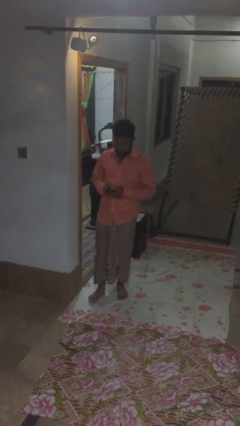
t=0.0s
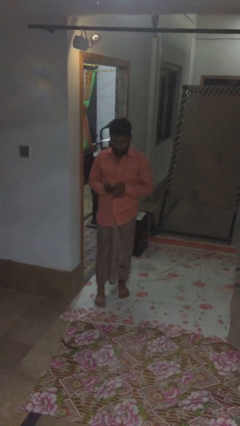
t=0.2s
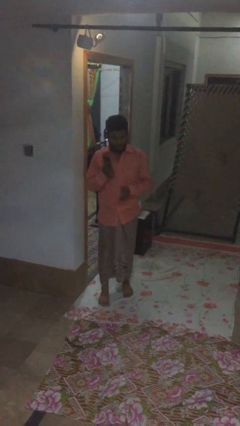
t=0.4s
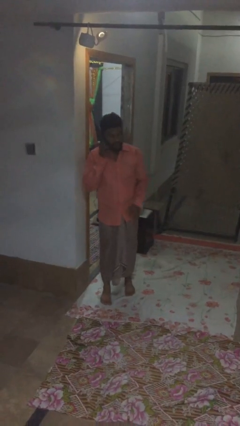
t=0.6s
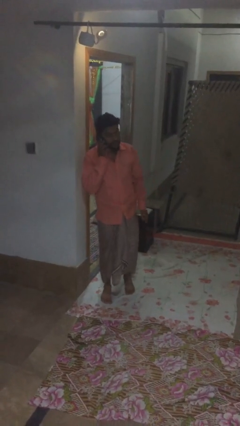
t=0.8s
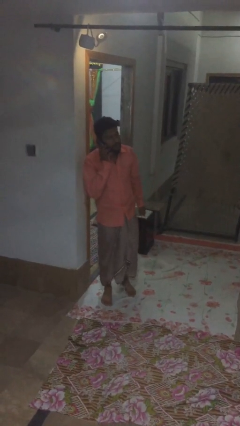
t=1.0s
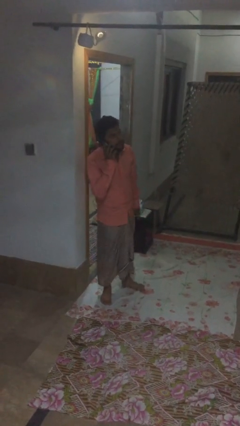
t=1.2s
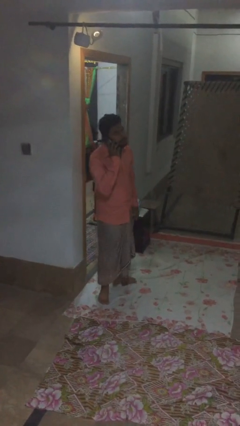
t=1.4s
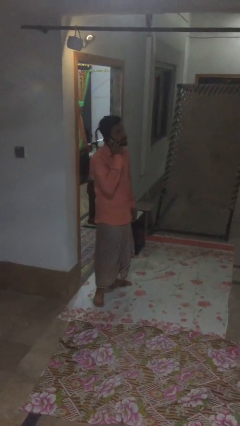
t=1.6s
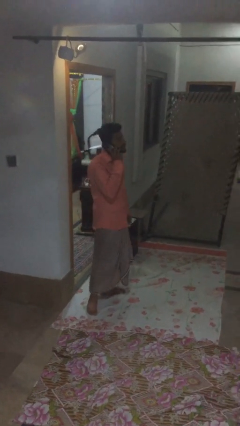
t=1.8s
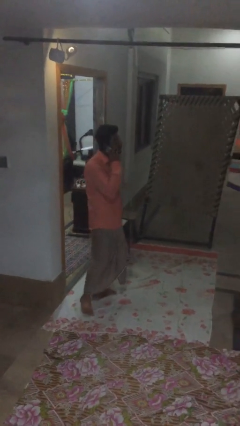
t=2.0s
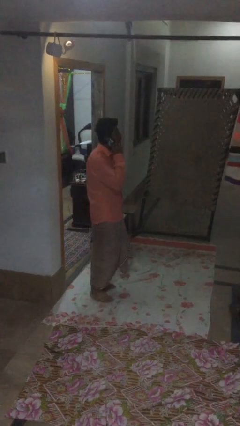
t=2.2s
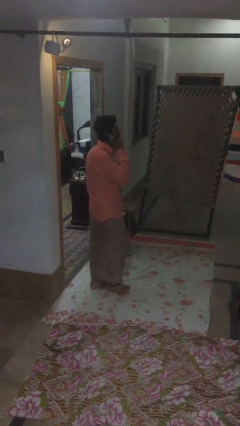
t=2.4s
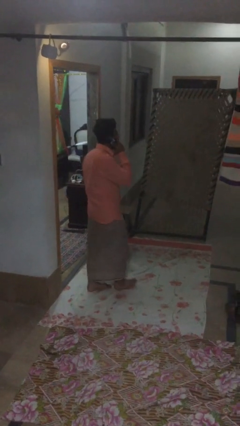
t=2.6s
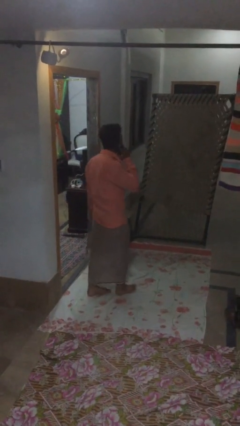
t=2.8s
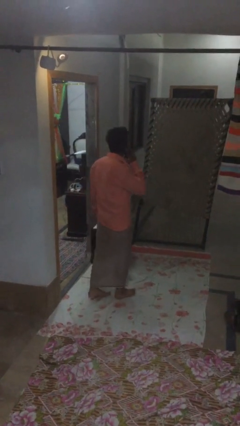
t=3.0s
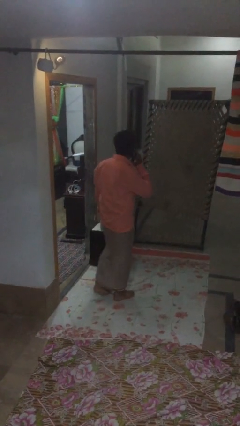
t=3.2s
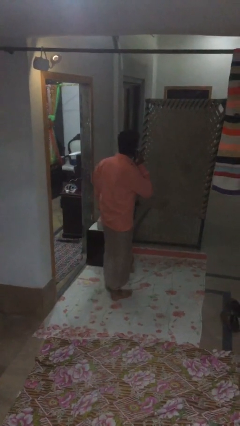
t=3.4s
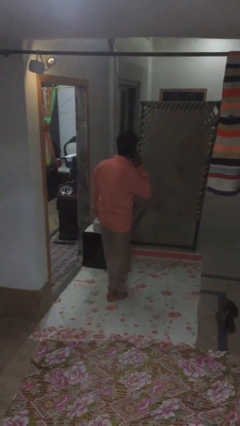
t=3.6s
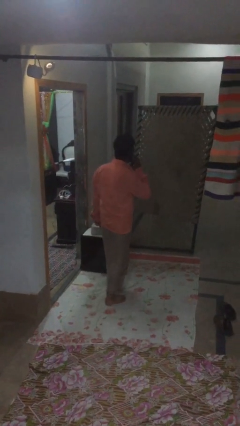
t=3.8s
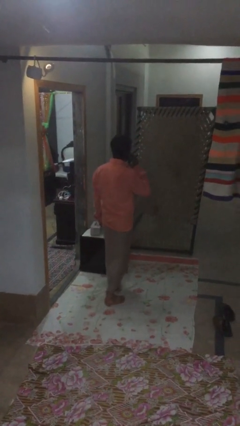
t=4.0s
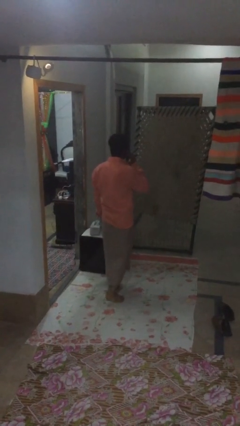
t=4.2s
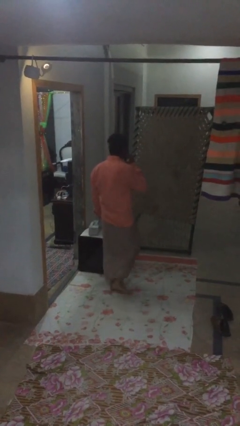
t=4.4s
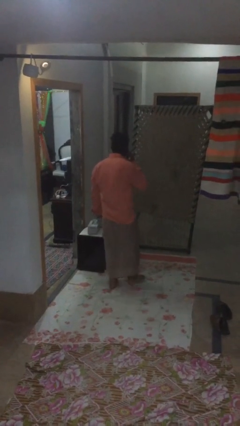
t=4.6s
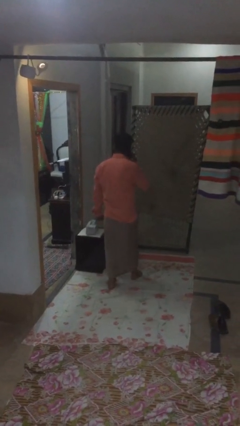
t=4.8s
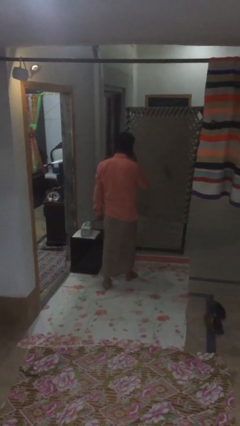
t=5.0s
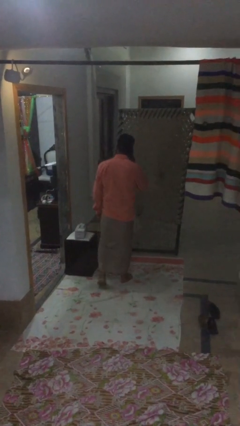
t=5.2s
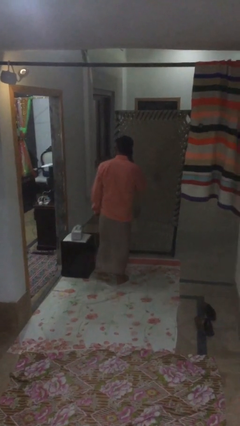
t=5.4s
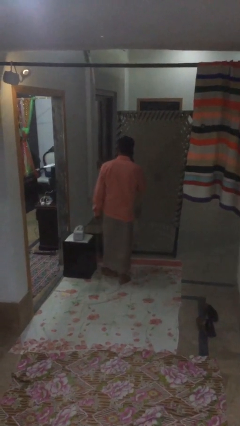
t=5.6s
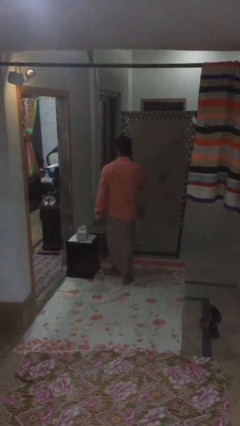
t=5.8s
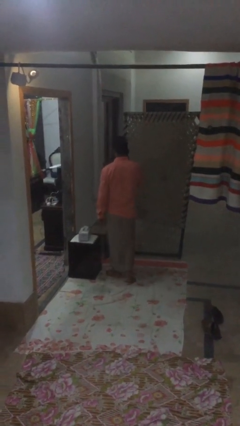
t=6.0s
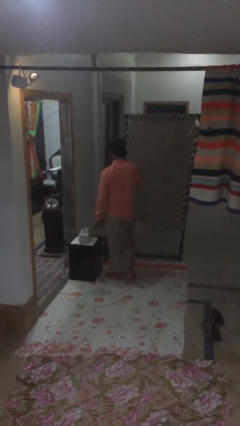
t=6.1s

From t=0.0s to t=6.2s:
person talks on phone

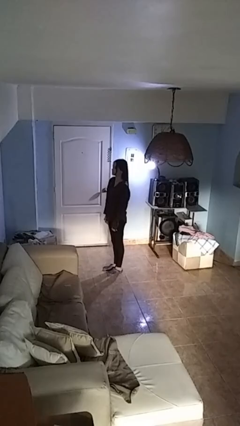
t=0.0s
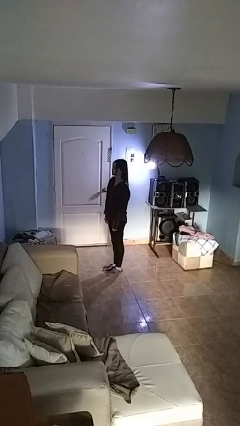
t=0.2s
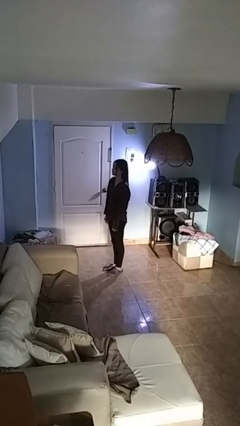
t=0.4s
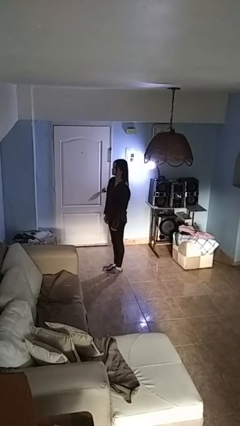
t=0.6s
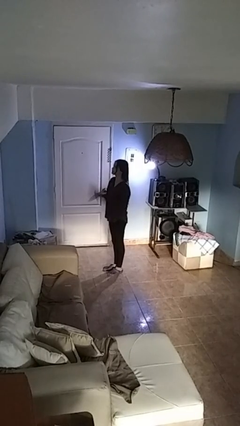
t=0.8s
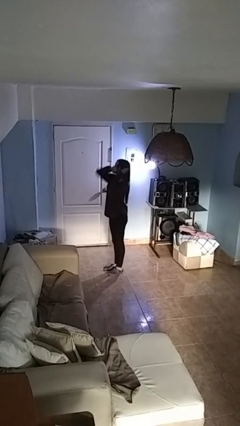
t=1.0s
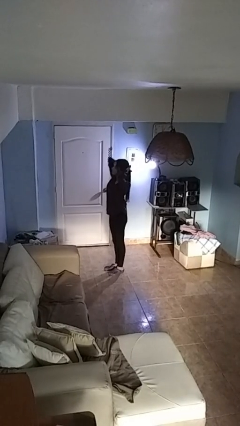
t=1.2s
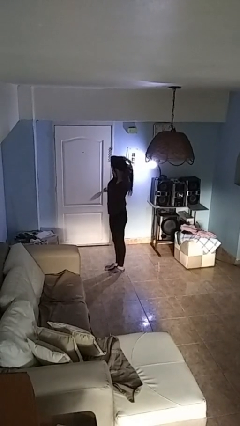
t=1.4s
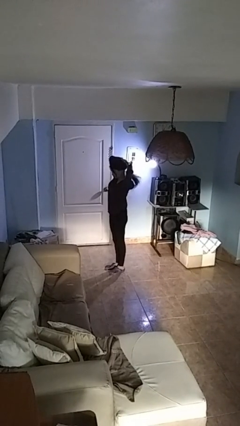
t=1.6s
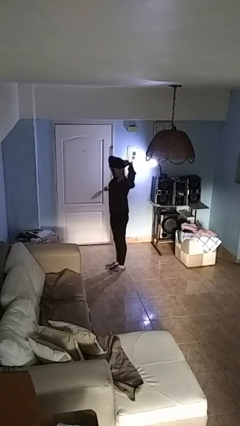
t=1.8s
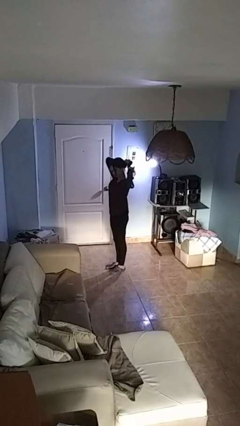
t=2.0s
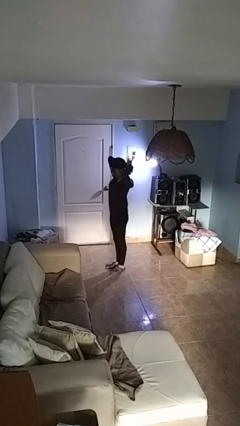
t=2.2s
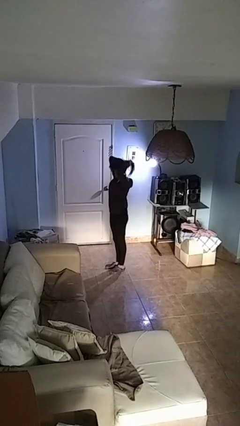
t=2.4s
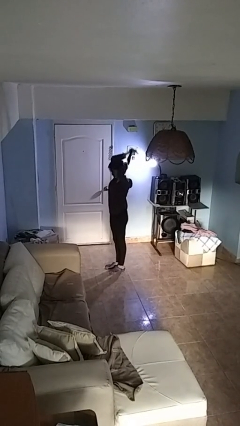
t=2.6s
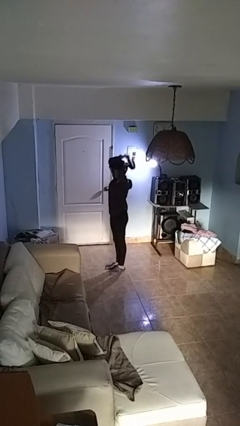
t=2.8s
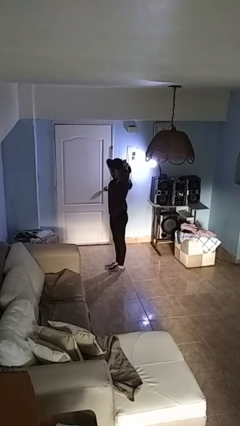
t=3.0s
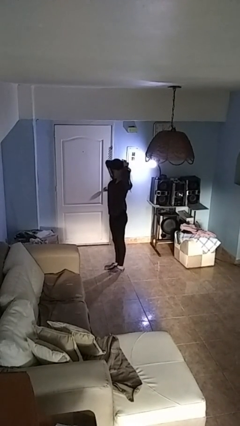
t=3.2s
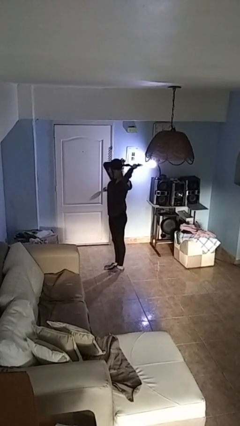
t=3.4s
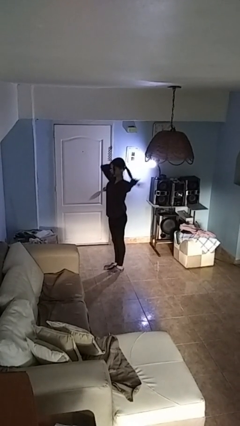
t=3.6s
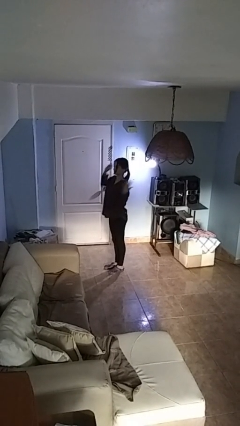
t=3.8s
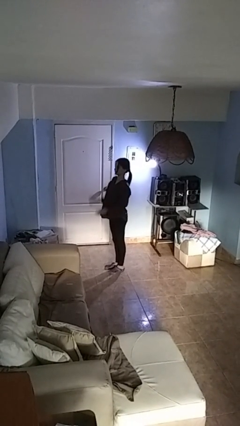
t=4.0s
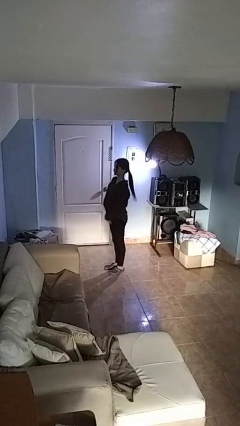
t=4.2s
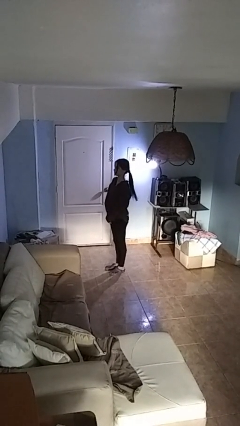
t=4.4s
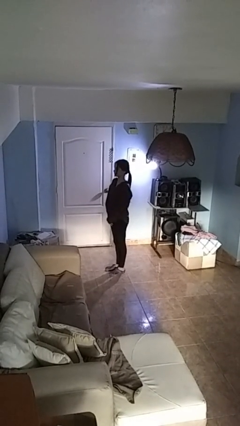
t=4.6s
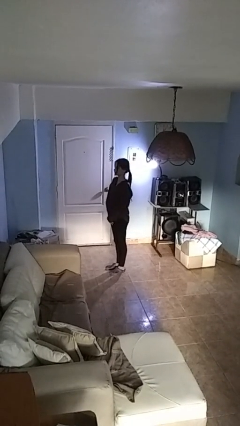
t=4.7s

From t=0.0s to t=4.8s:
person puts hair in ponytail

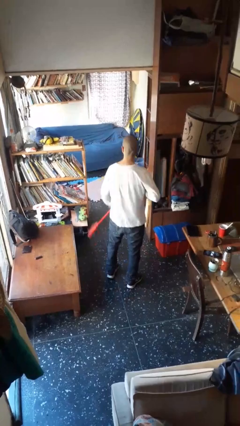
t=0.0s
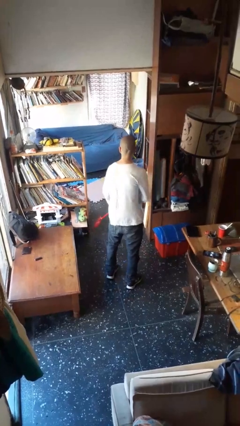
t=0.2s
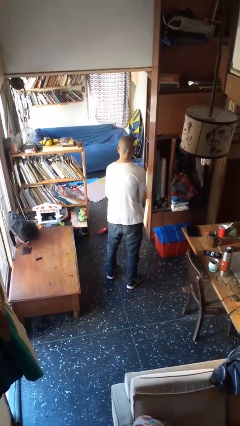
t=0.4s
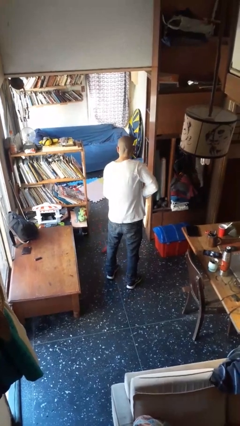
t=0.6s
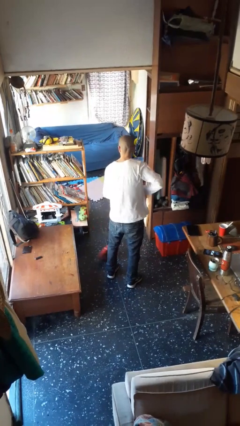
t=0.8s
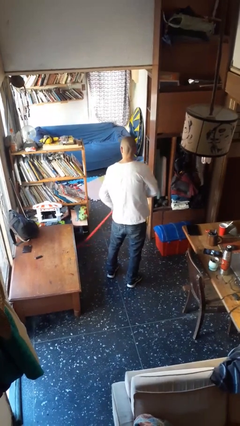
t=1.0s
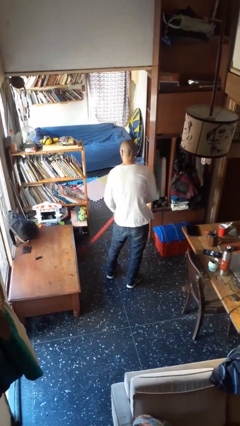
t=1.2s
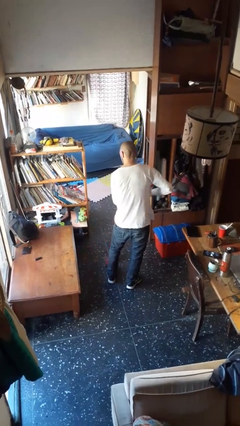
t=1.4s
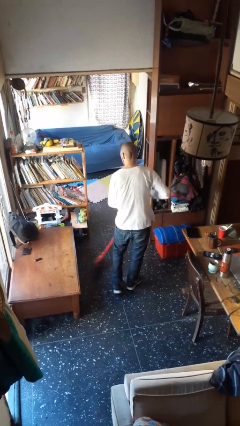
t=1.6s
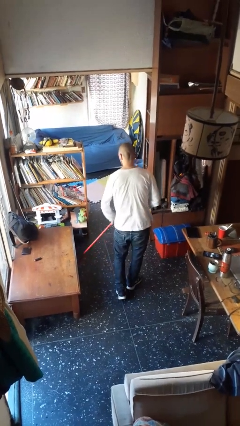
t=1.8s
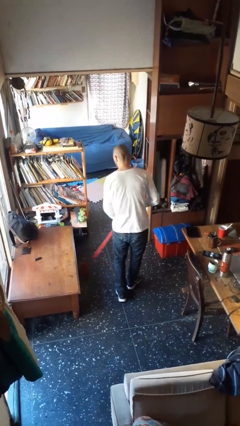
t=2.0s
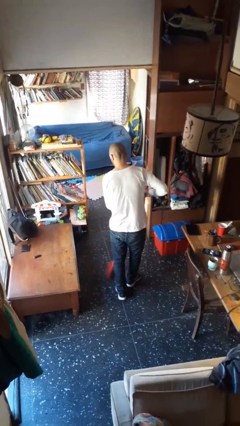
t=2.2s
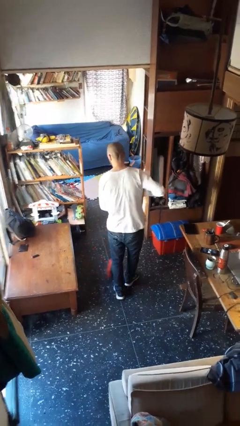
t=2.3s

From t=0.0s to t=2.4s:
person sweeps floor

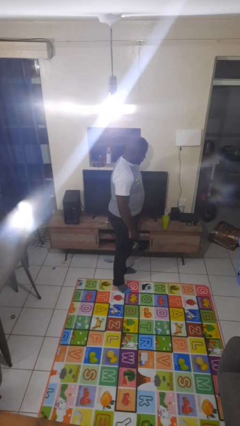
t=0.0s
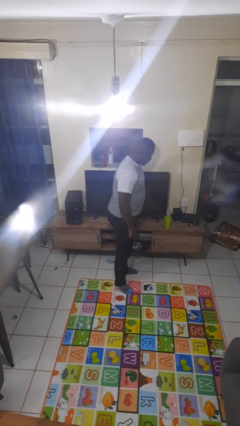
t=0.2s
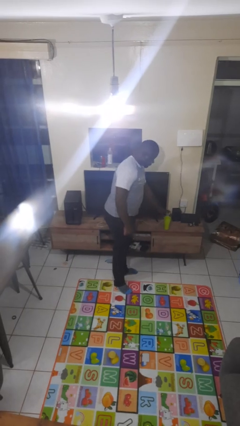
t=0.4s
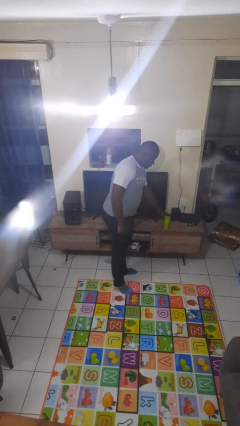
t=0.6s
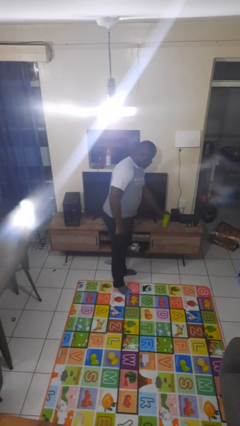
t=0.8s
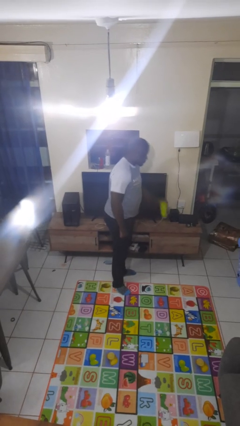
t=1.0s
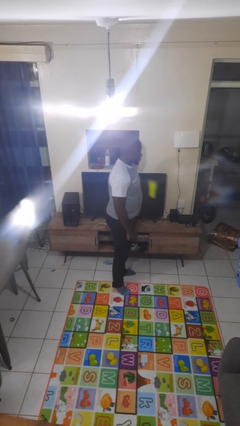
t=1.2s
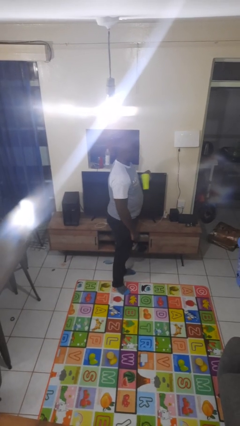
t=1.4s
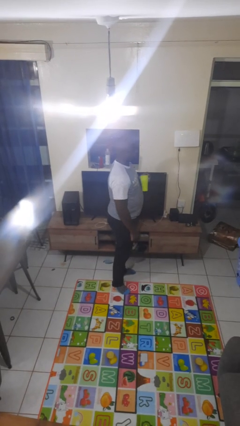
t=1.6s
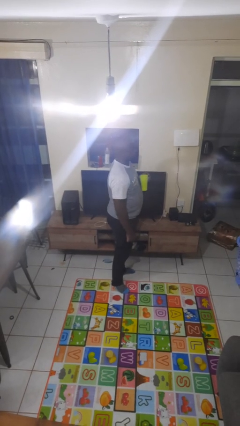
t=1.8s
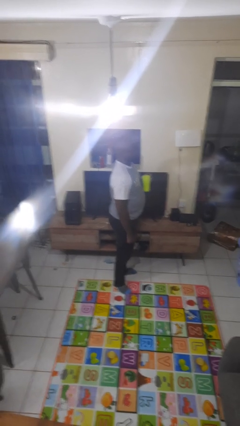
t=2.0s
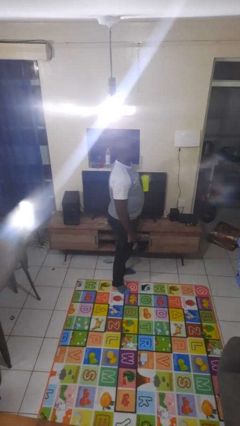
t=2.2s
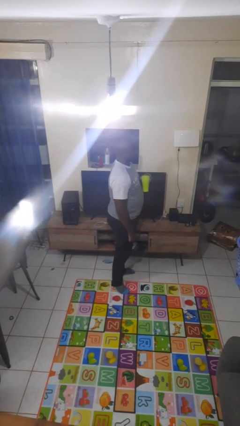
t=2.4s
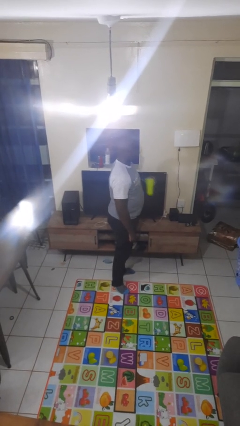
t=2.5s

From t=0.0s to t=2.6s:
person picks up object from countertop

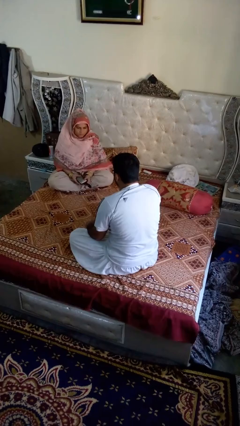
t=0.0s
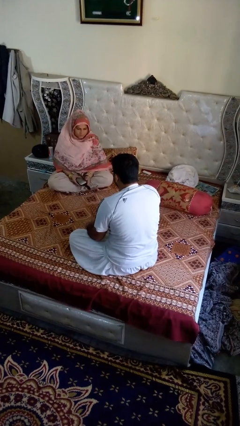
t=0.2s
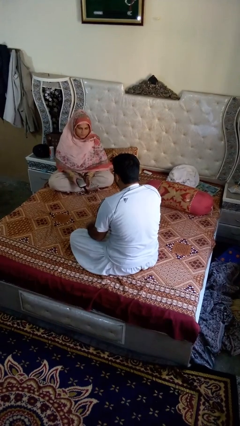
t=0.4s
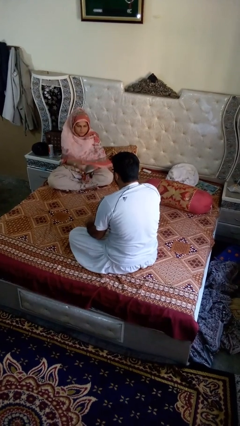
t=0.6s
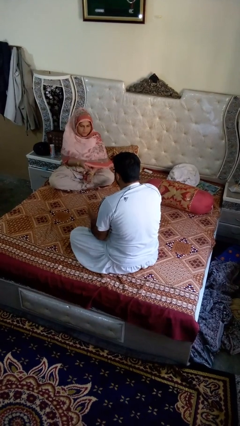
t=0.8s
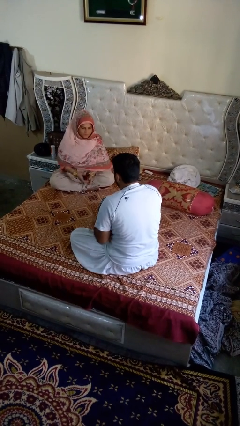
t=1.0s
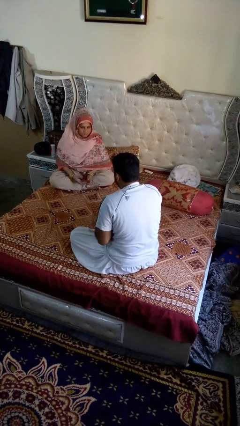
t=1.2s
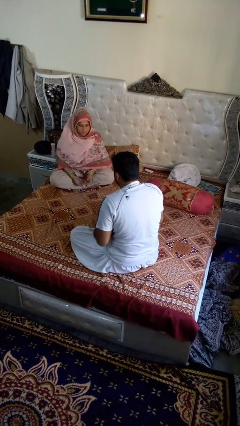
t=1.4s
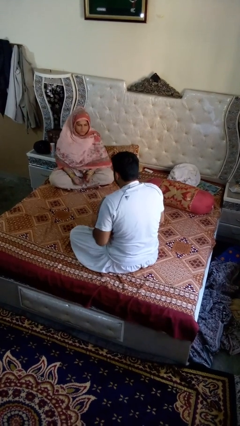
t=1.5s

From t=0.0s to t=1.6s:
person catches object from person

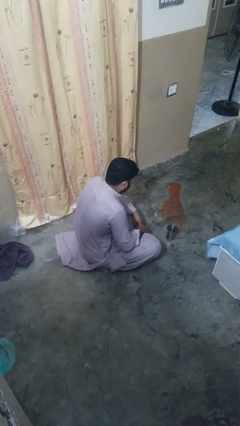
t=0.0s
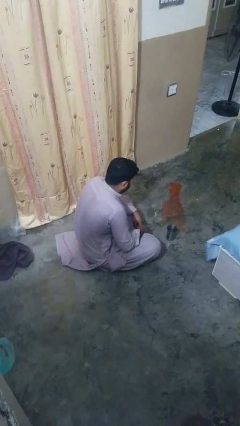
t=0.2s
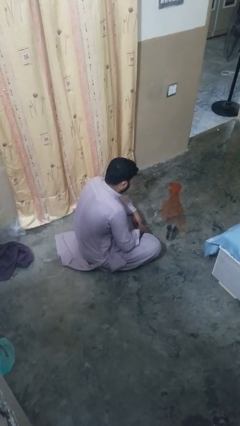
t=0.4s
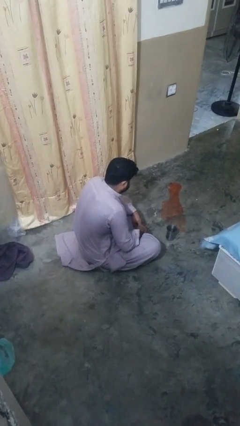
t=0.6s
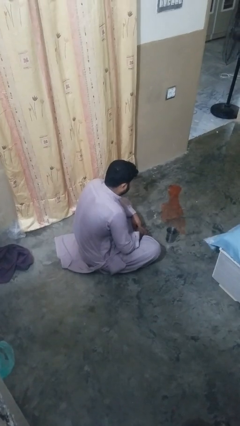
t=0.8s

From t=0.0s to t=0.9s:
person spills on floor
